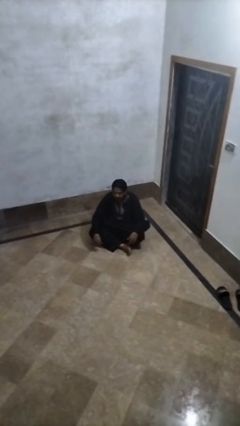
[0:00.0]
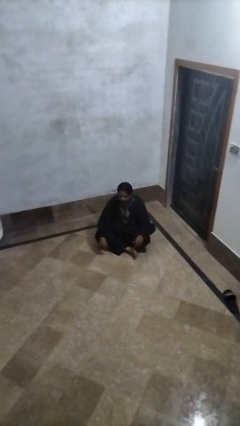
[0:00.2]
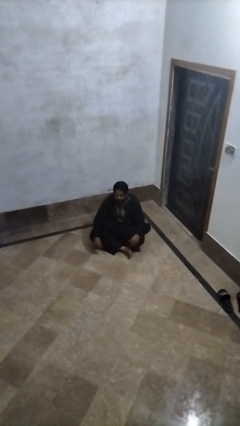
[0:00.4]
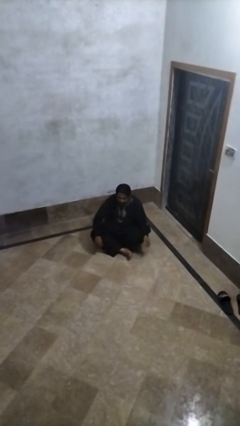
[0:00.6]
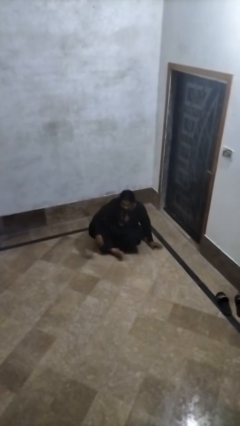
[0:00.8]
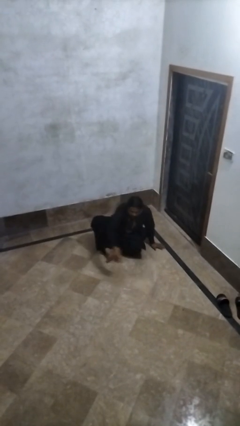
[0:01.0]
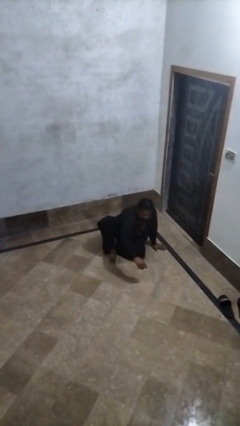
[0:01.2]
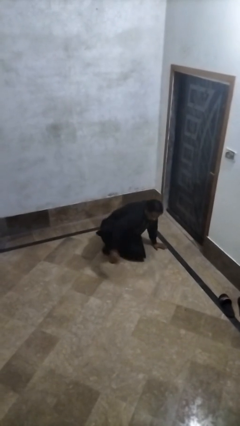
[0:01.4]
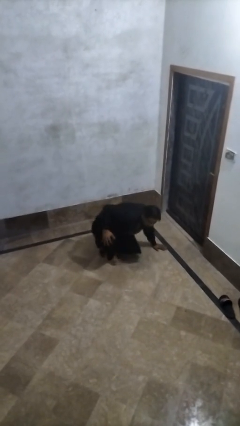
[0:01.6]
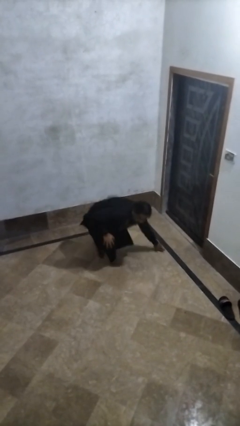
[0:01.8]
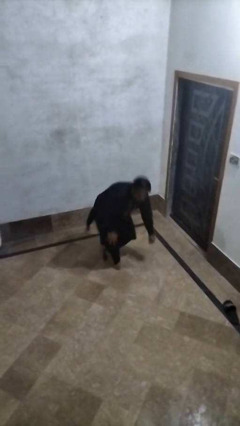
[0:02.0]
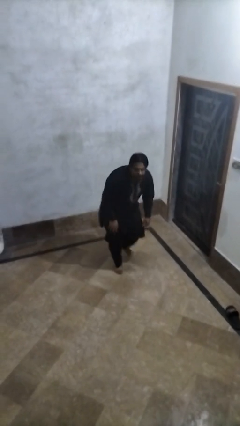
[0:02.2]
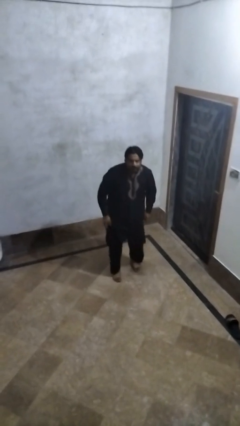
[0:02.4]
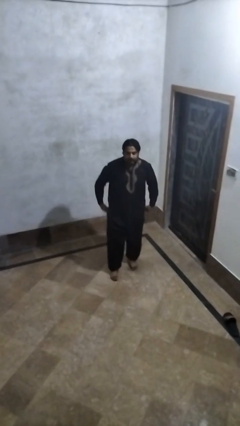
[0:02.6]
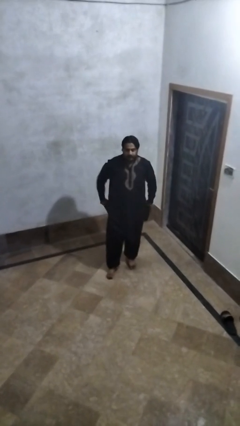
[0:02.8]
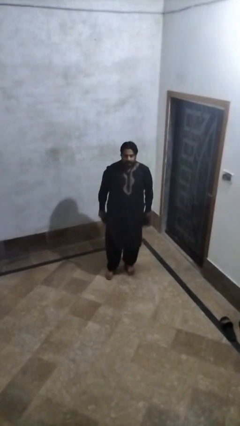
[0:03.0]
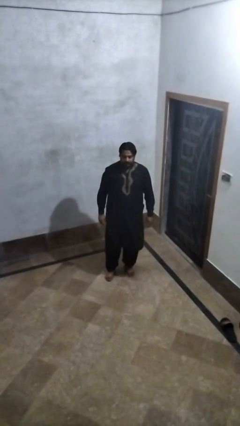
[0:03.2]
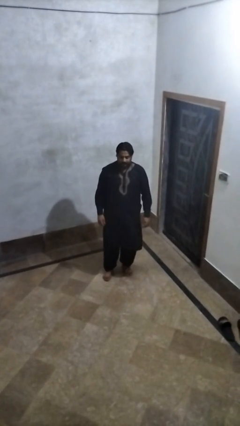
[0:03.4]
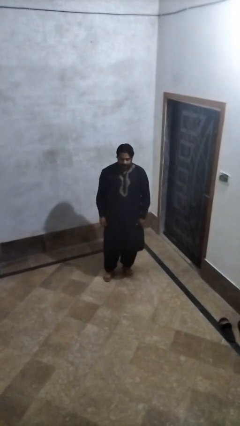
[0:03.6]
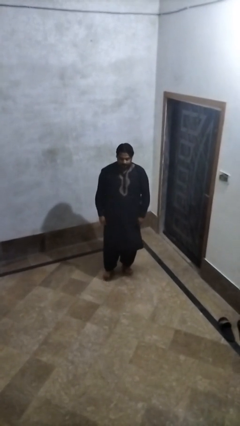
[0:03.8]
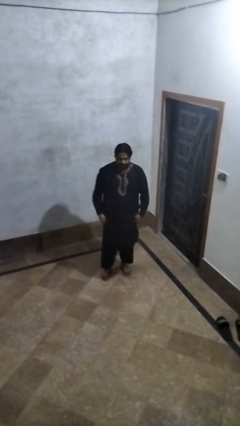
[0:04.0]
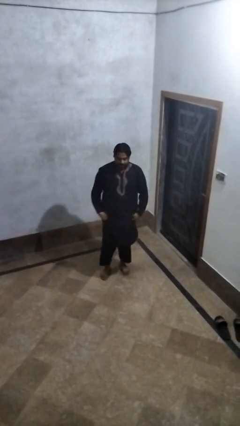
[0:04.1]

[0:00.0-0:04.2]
person stands up from floor

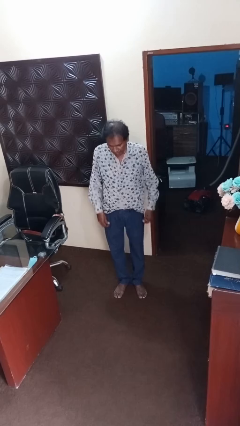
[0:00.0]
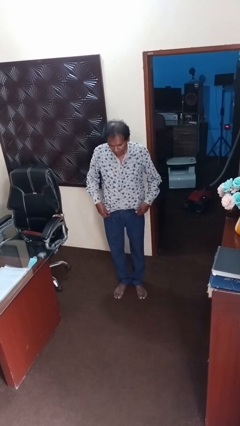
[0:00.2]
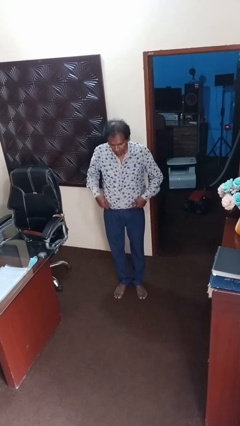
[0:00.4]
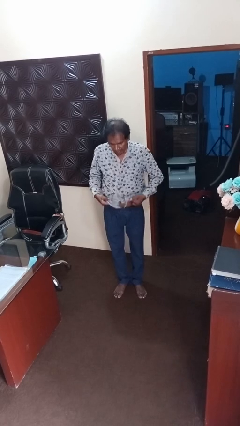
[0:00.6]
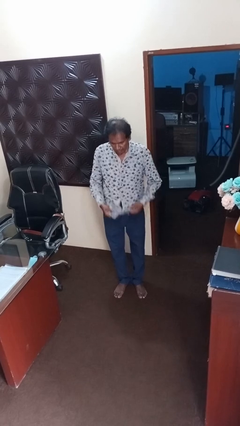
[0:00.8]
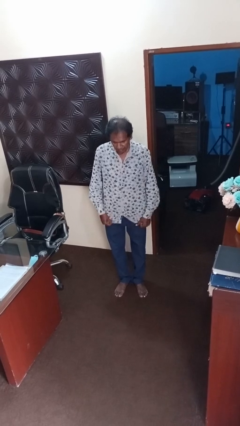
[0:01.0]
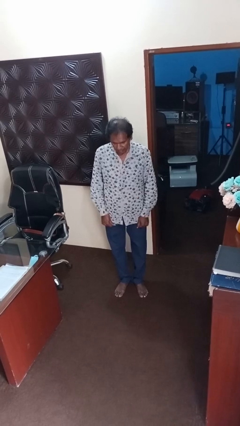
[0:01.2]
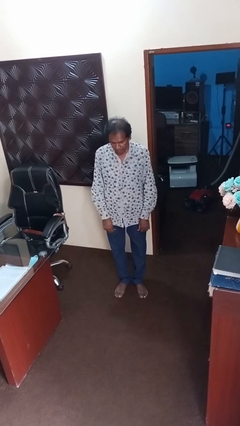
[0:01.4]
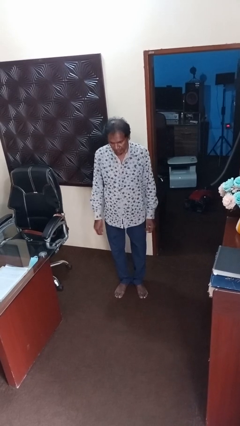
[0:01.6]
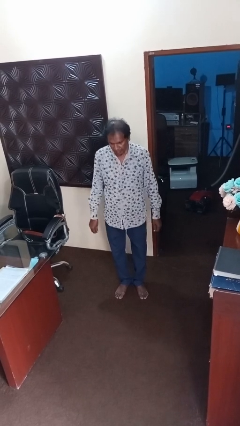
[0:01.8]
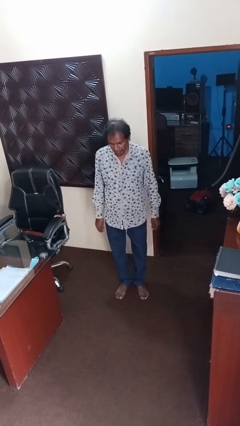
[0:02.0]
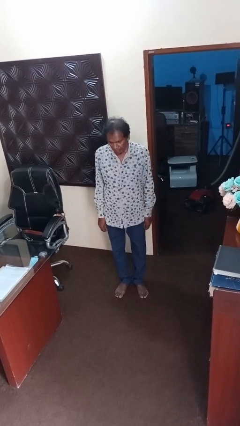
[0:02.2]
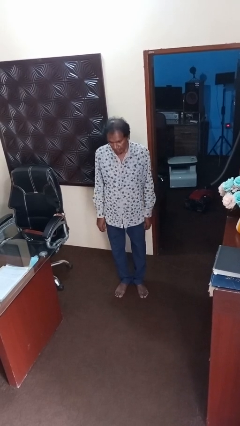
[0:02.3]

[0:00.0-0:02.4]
person untucks shirt

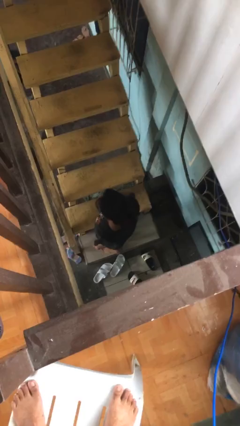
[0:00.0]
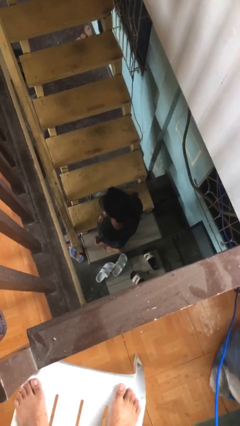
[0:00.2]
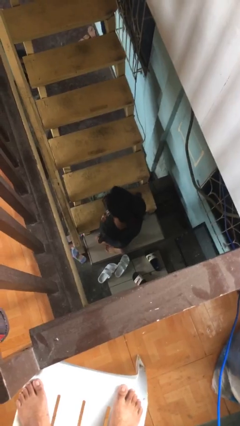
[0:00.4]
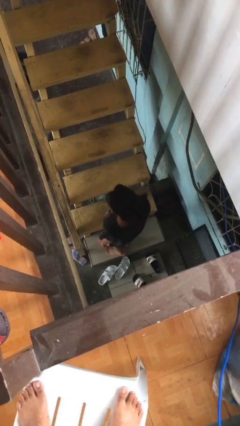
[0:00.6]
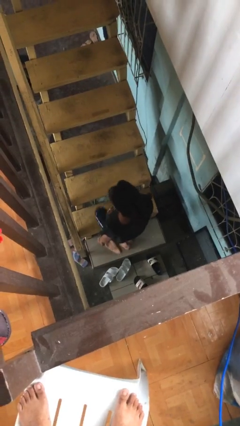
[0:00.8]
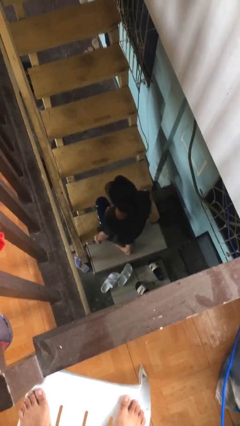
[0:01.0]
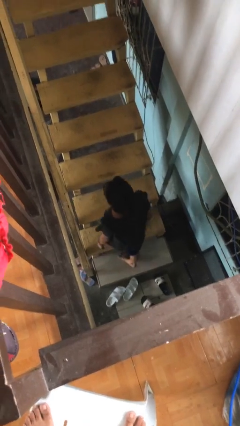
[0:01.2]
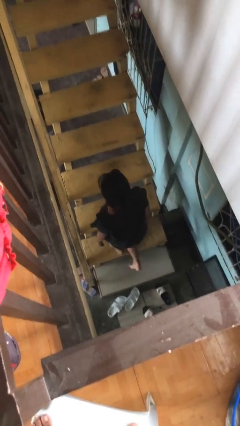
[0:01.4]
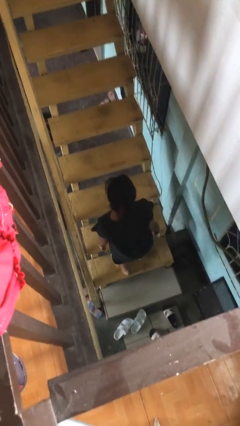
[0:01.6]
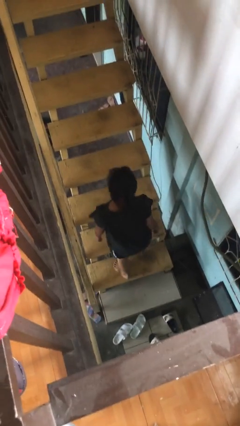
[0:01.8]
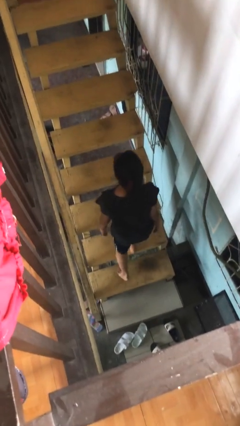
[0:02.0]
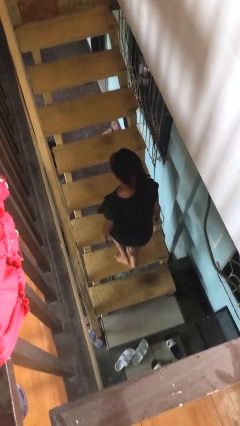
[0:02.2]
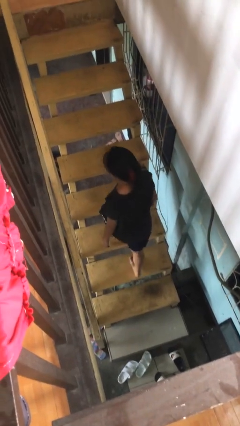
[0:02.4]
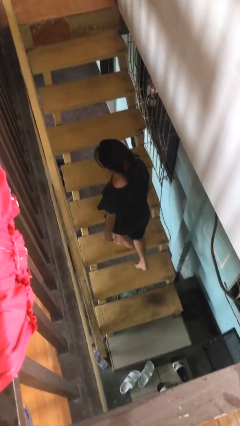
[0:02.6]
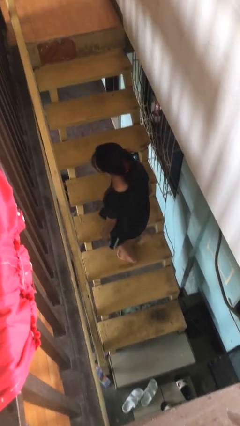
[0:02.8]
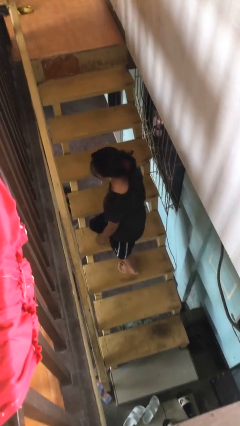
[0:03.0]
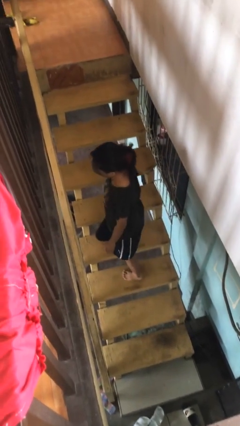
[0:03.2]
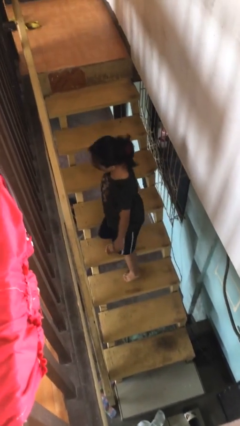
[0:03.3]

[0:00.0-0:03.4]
person climbs up stairs

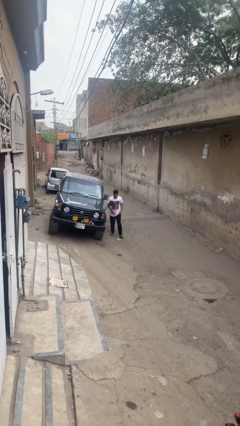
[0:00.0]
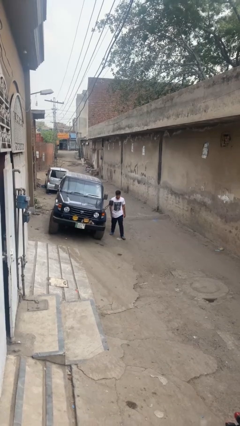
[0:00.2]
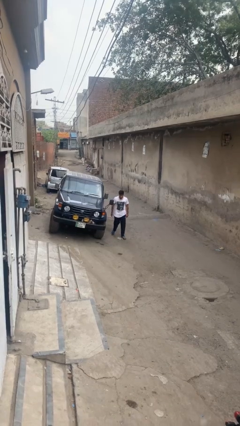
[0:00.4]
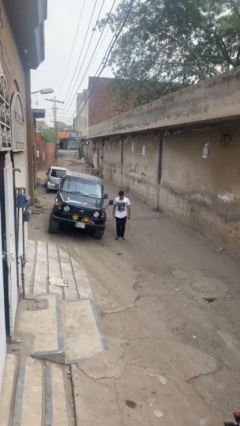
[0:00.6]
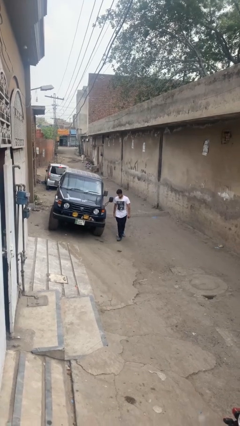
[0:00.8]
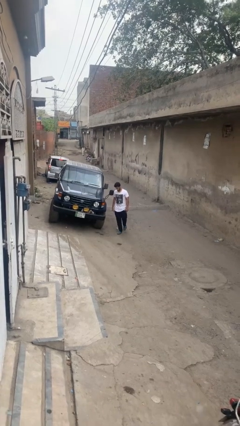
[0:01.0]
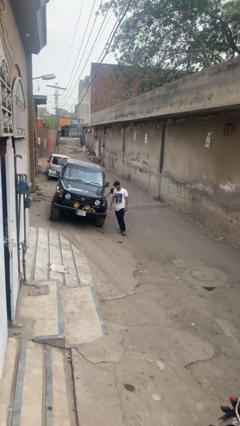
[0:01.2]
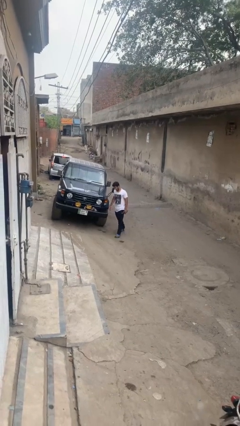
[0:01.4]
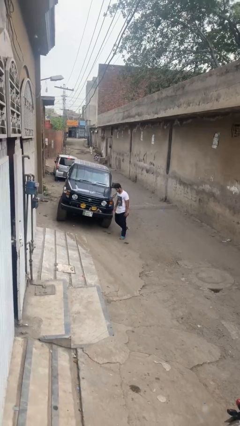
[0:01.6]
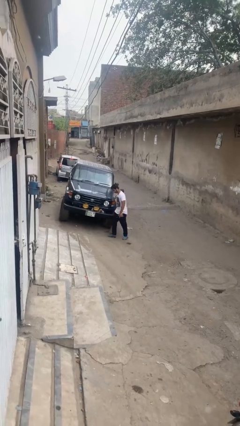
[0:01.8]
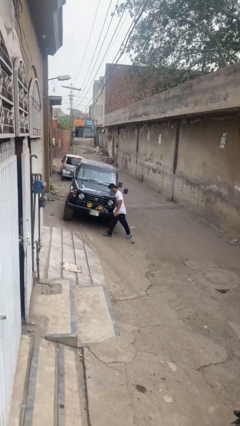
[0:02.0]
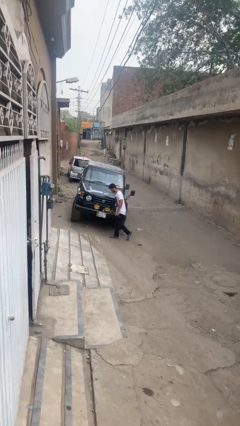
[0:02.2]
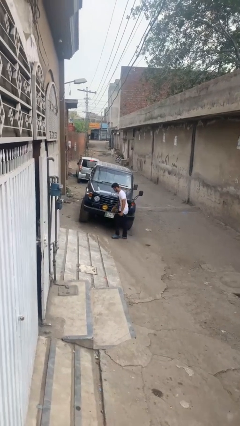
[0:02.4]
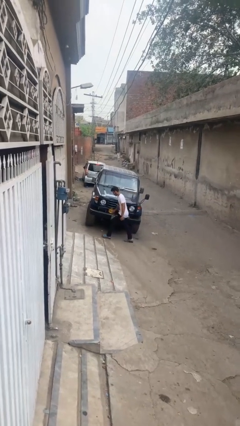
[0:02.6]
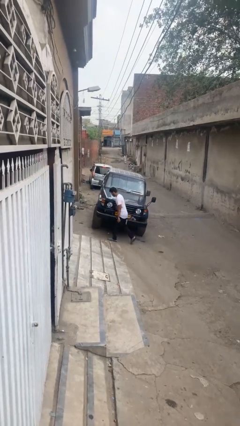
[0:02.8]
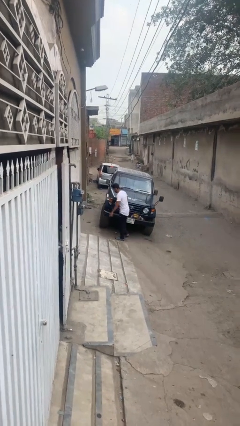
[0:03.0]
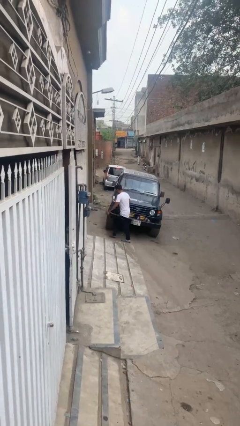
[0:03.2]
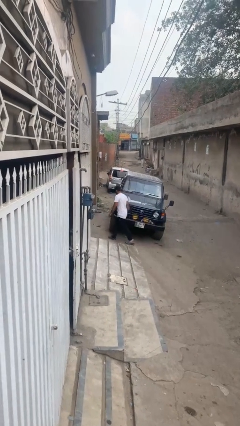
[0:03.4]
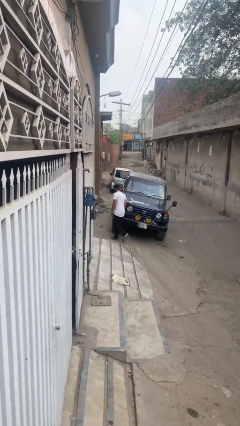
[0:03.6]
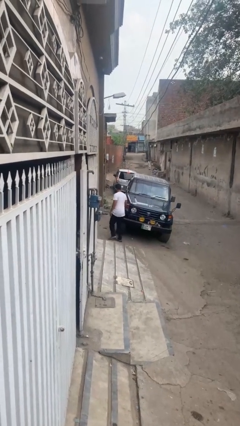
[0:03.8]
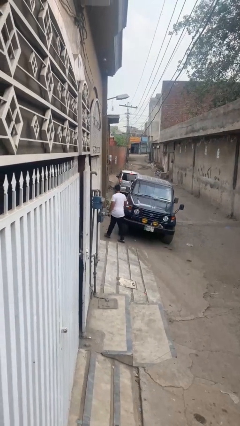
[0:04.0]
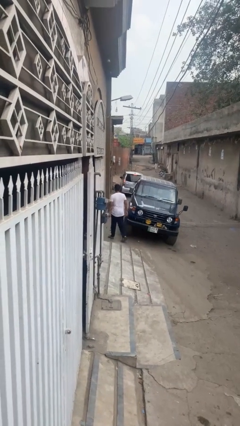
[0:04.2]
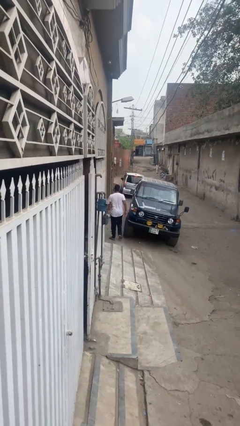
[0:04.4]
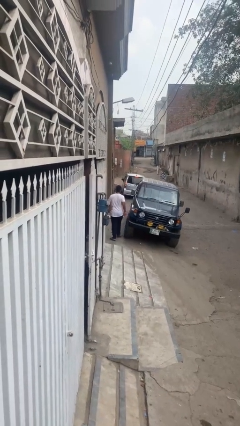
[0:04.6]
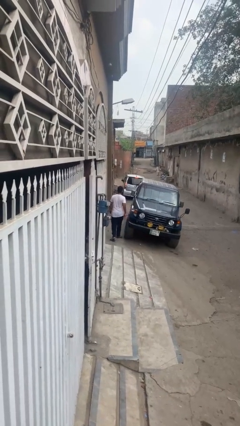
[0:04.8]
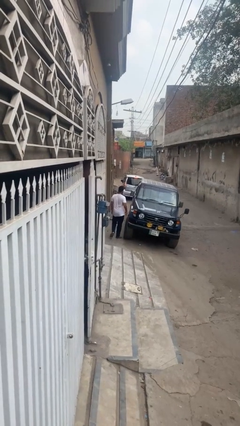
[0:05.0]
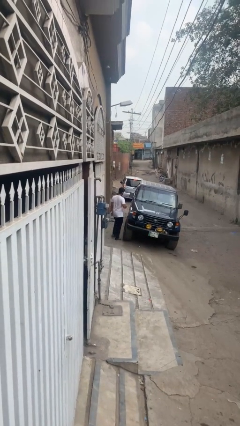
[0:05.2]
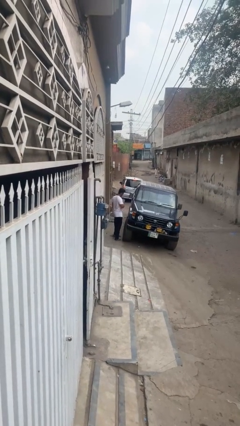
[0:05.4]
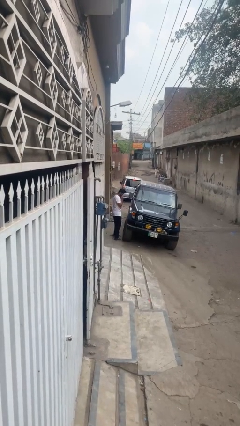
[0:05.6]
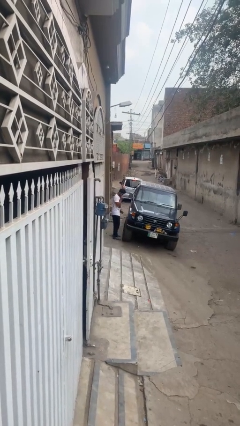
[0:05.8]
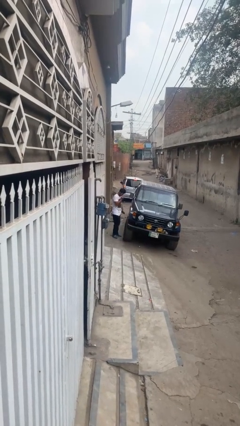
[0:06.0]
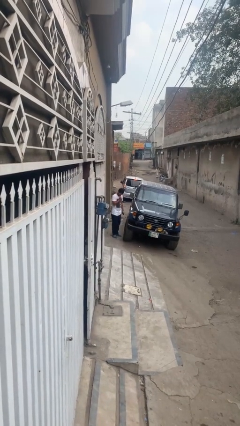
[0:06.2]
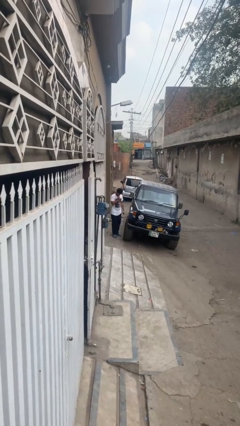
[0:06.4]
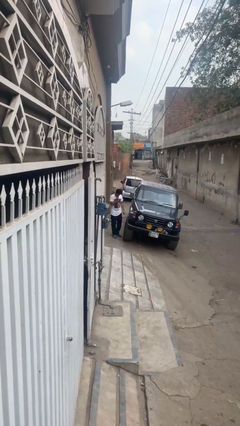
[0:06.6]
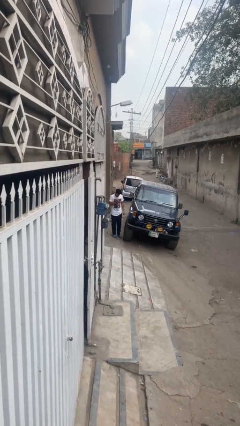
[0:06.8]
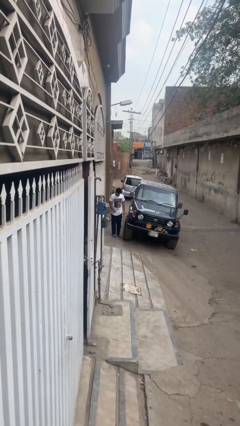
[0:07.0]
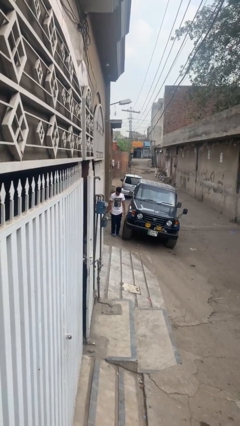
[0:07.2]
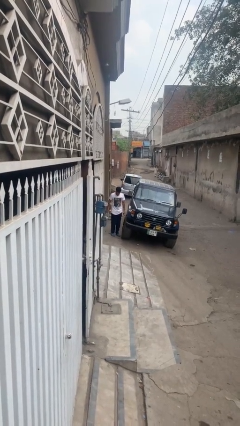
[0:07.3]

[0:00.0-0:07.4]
person walks around car

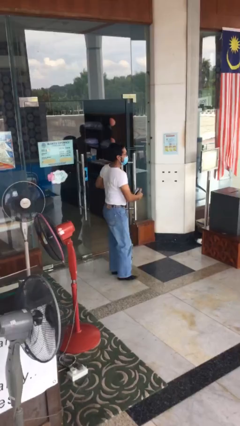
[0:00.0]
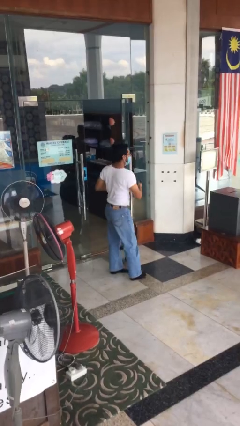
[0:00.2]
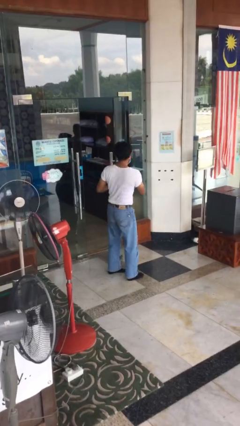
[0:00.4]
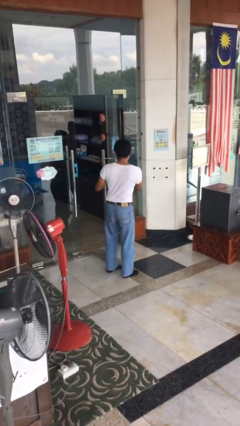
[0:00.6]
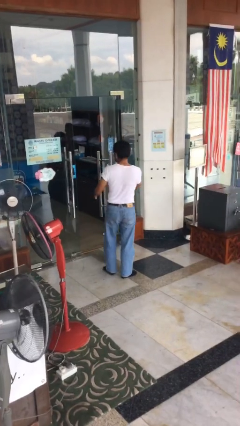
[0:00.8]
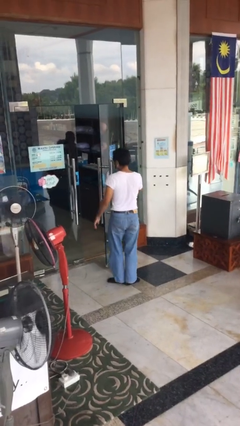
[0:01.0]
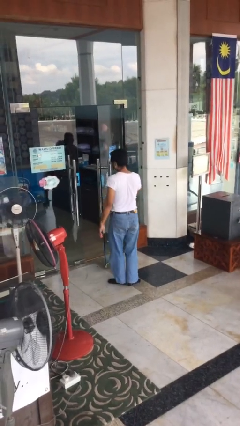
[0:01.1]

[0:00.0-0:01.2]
person enters scene through structure
